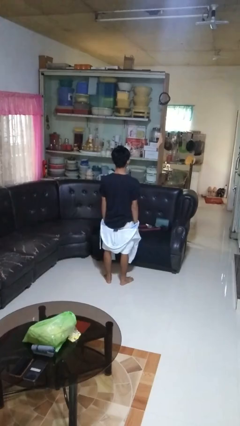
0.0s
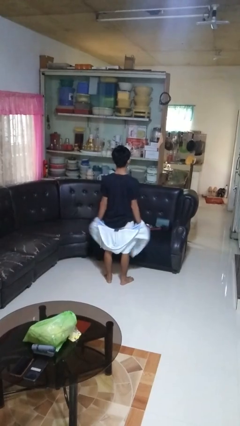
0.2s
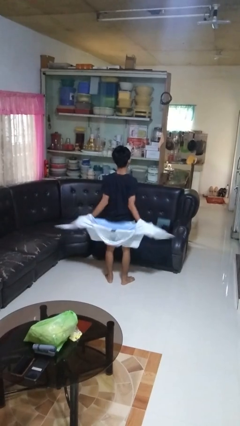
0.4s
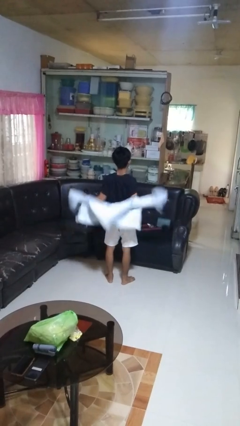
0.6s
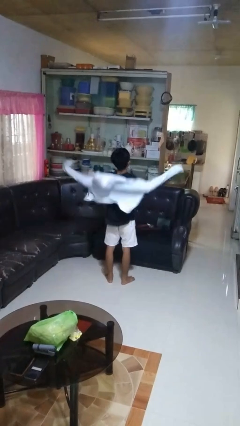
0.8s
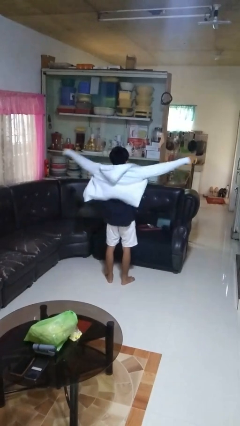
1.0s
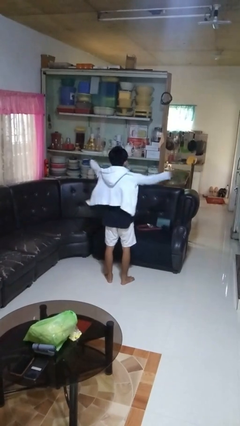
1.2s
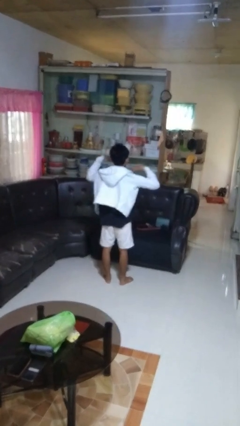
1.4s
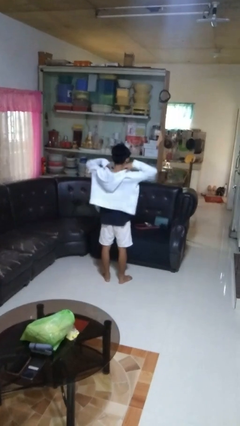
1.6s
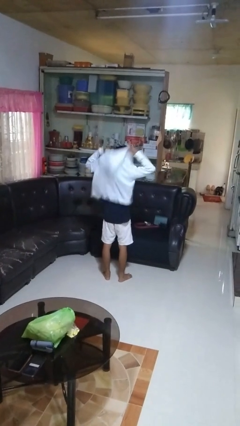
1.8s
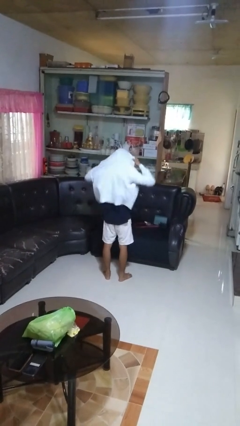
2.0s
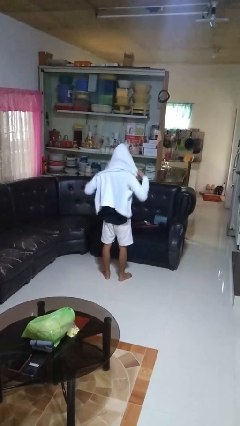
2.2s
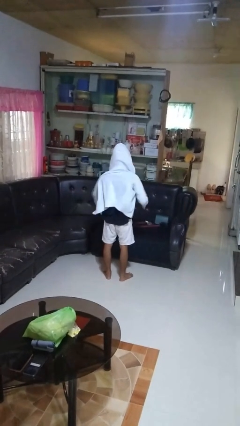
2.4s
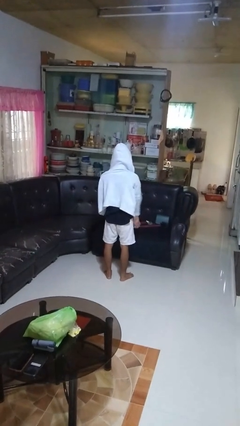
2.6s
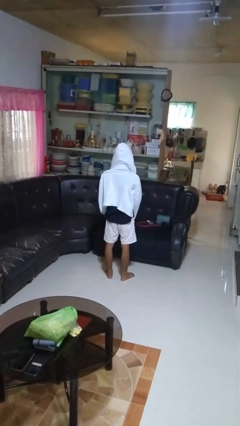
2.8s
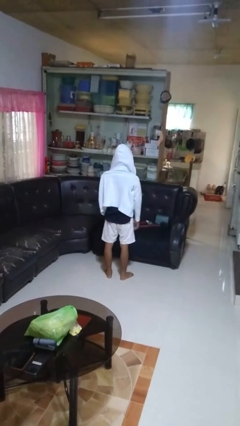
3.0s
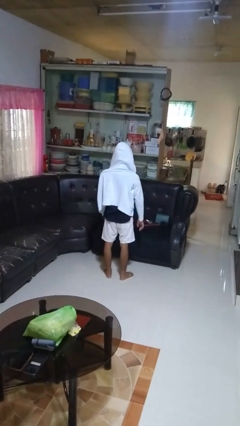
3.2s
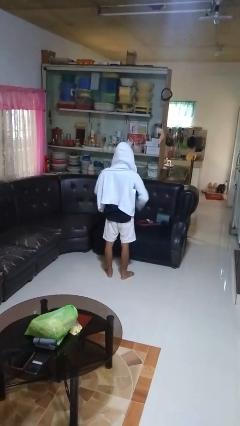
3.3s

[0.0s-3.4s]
person puts on hoodie

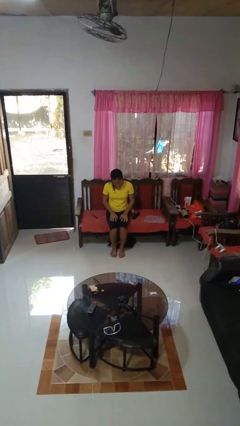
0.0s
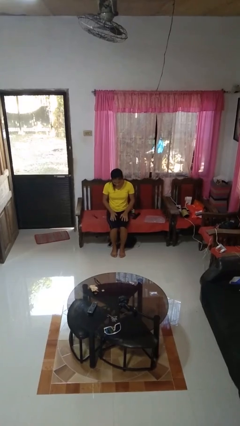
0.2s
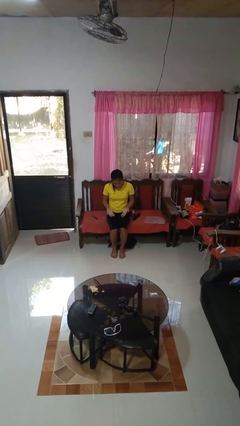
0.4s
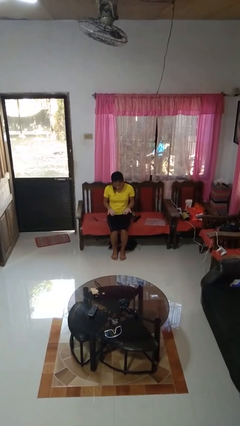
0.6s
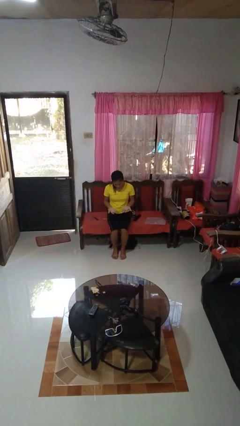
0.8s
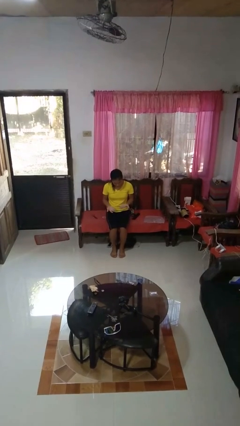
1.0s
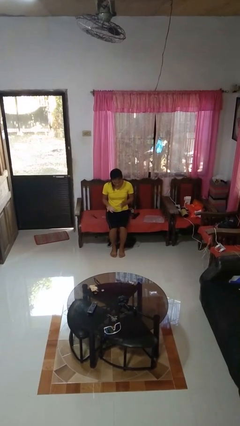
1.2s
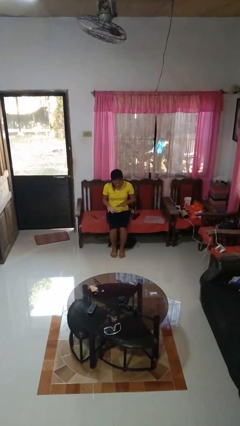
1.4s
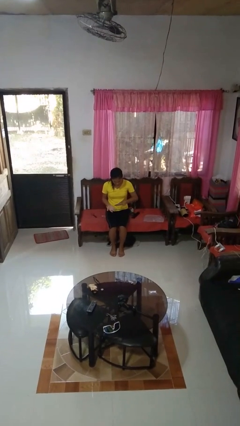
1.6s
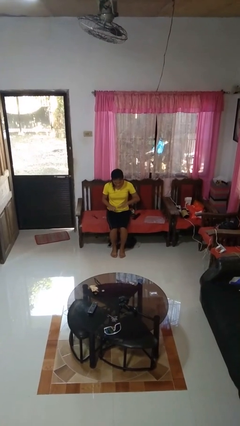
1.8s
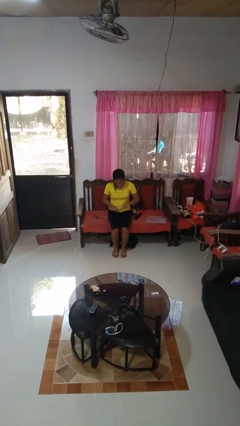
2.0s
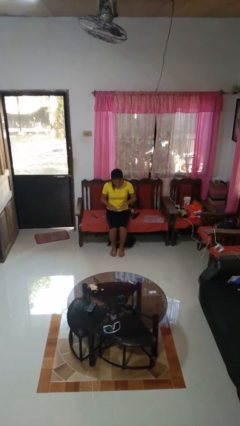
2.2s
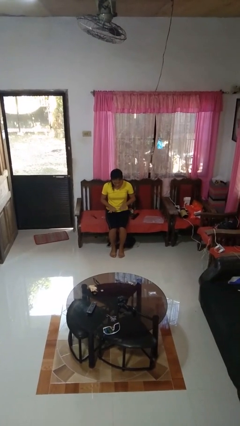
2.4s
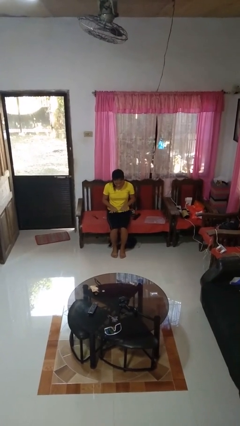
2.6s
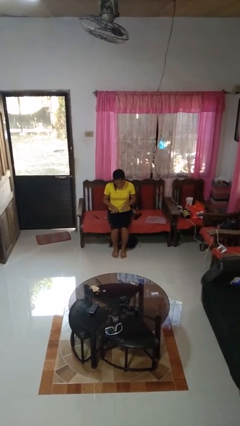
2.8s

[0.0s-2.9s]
person looks at hands in lap

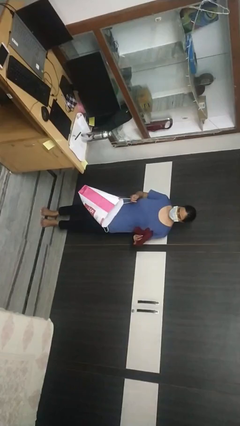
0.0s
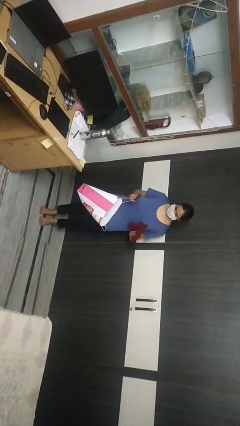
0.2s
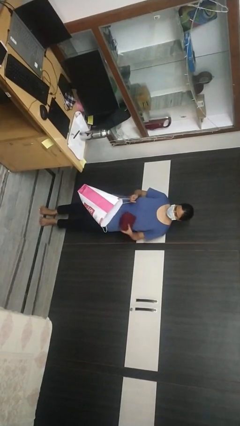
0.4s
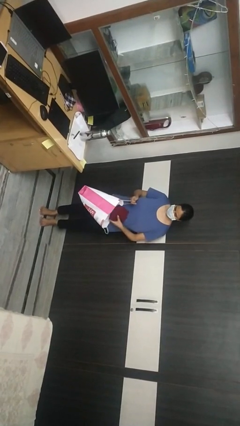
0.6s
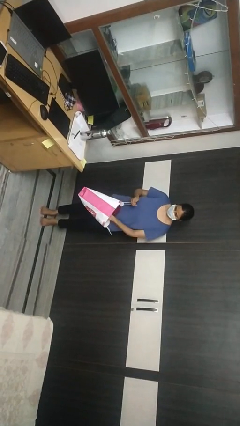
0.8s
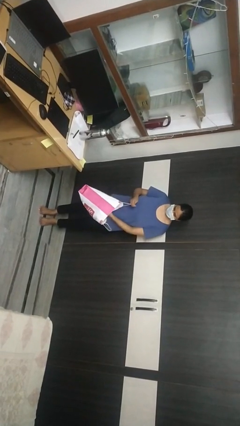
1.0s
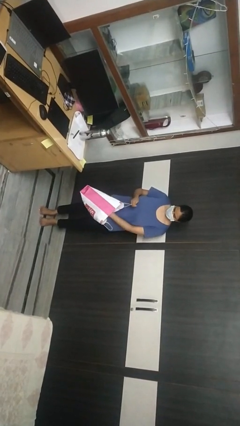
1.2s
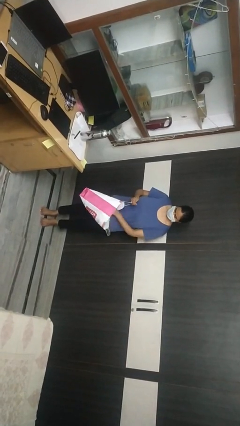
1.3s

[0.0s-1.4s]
person puts object into bag

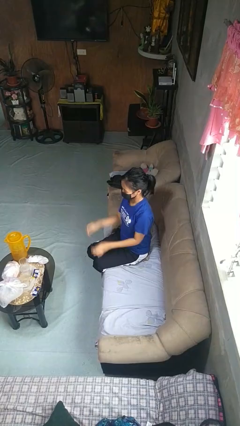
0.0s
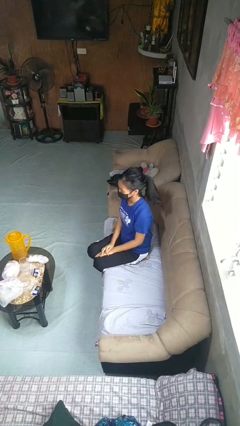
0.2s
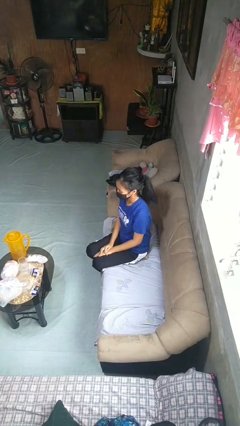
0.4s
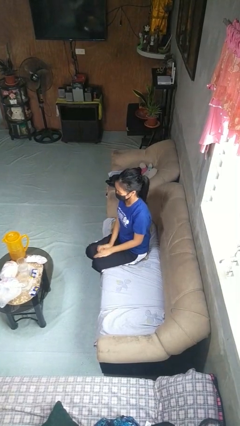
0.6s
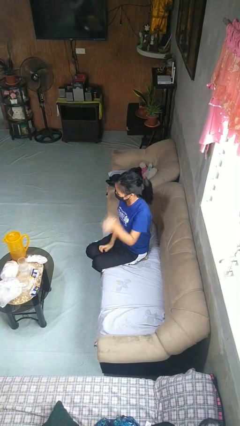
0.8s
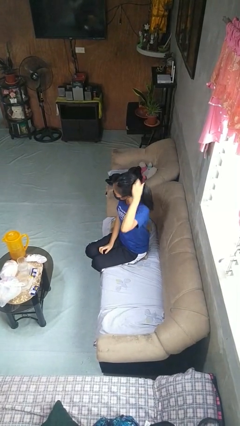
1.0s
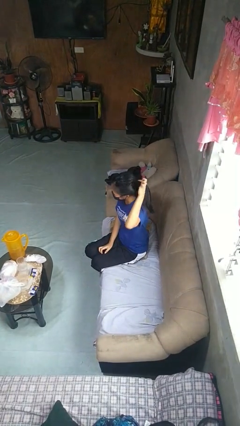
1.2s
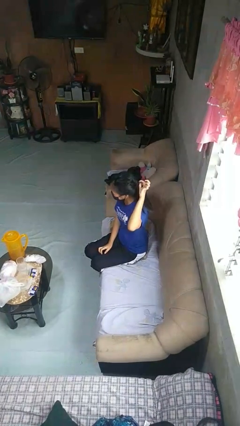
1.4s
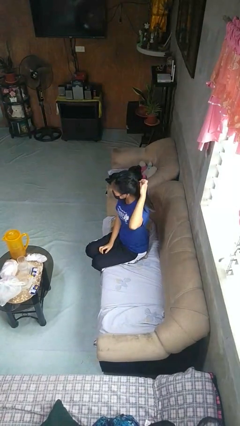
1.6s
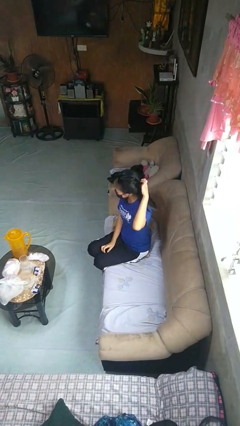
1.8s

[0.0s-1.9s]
person takes off hairtie

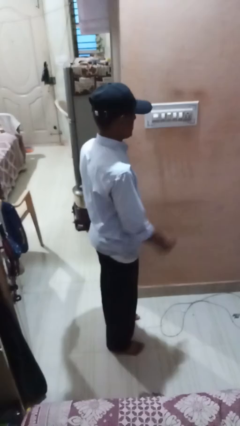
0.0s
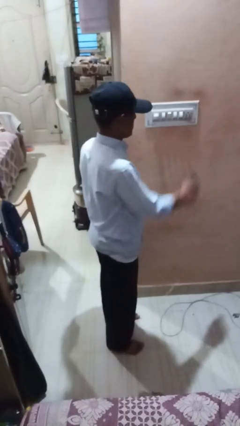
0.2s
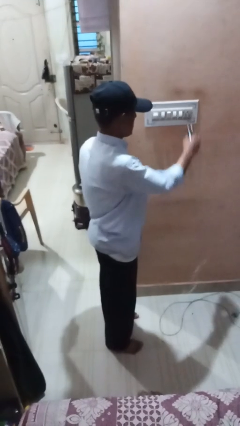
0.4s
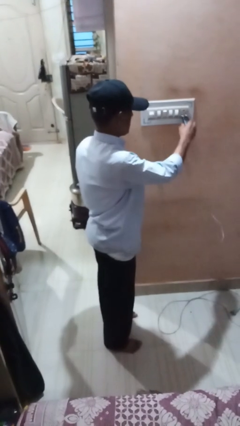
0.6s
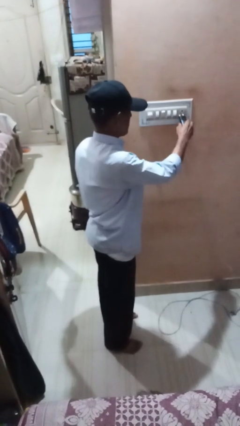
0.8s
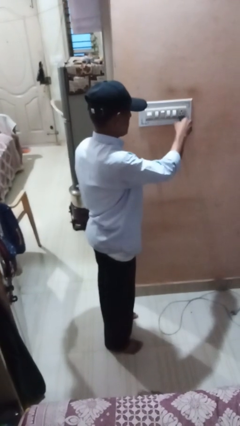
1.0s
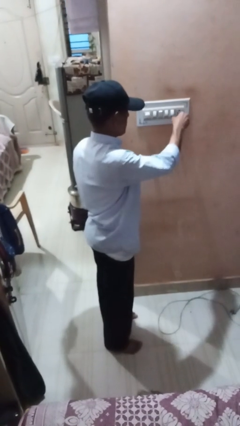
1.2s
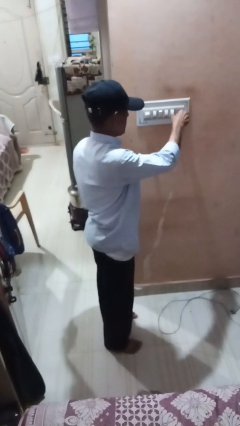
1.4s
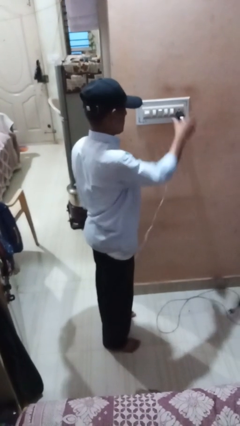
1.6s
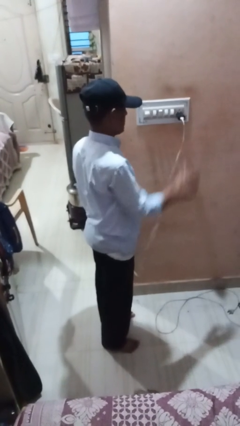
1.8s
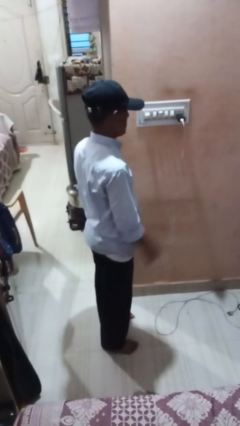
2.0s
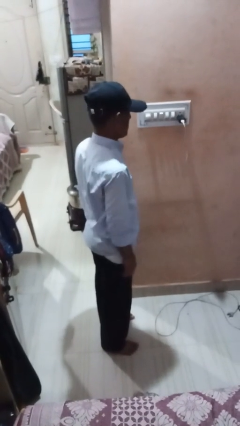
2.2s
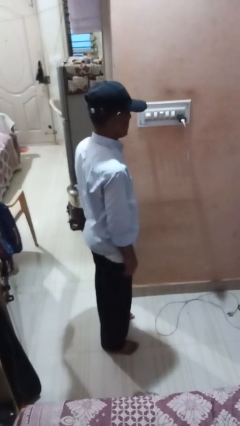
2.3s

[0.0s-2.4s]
person plugs into electrical socket

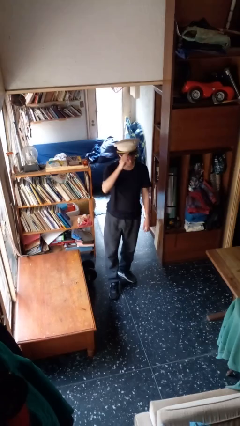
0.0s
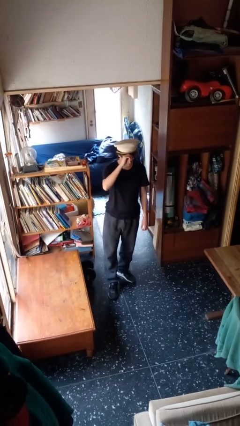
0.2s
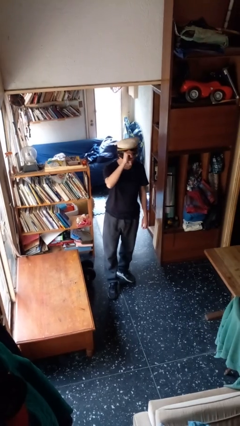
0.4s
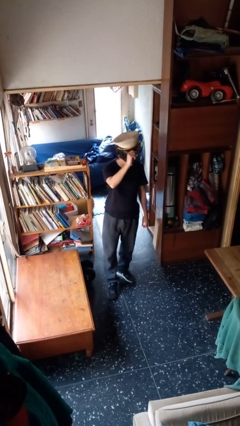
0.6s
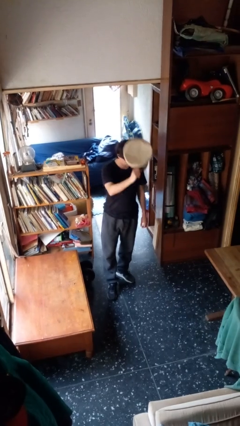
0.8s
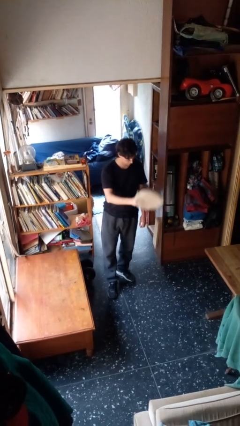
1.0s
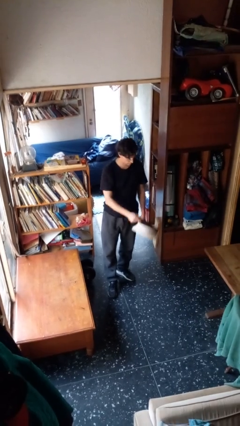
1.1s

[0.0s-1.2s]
person takes off hat

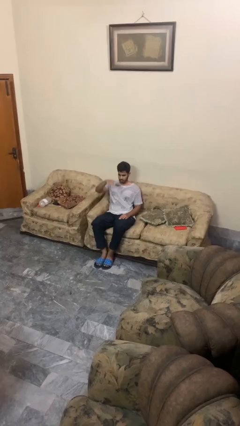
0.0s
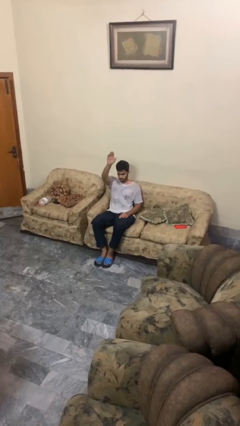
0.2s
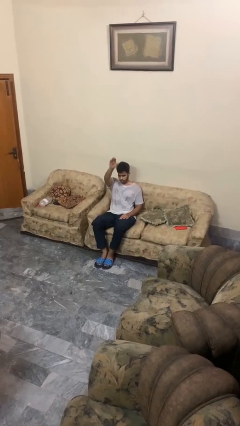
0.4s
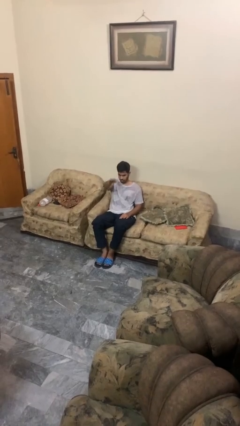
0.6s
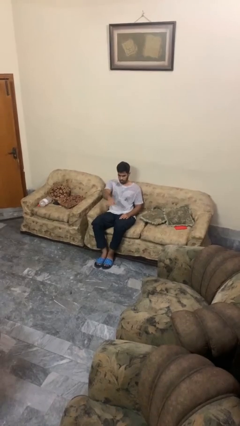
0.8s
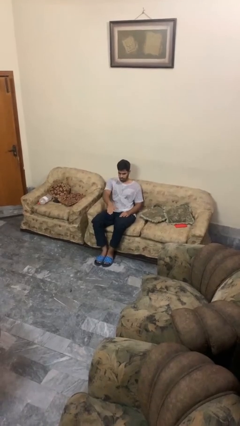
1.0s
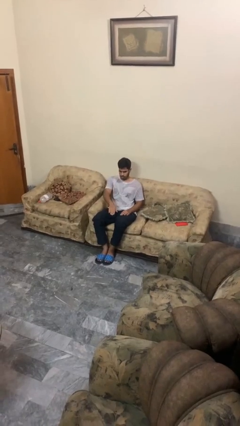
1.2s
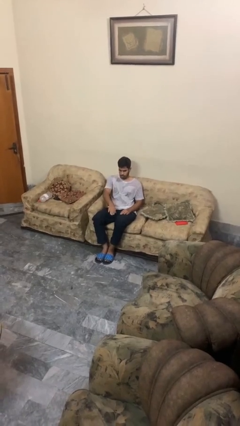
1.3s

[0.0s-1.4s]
person gestures swipe down

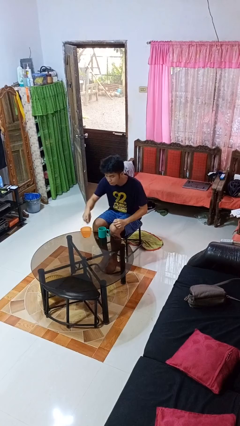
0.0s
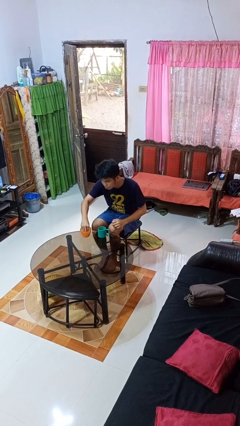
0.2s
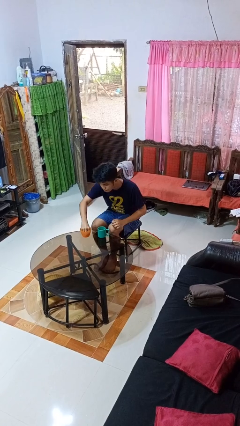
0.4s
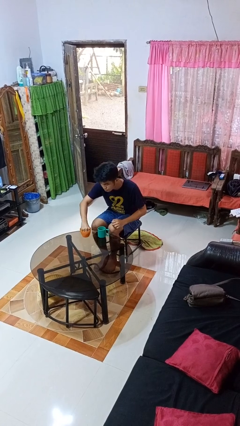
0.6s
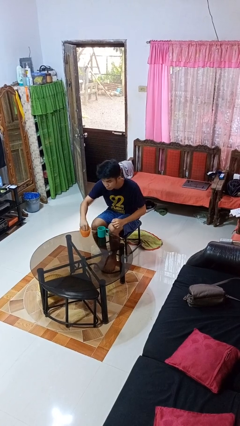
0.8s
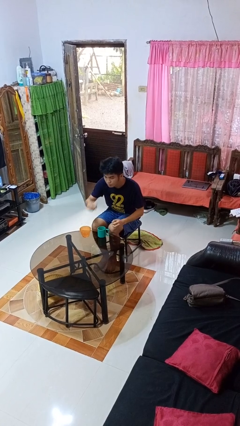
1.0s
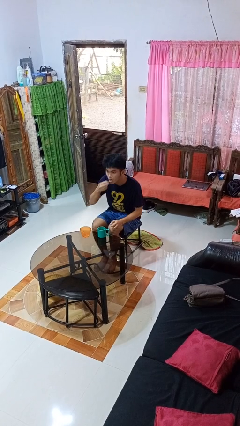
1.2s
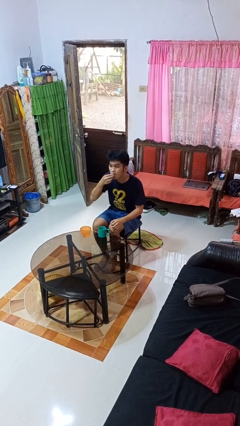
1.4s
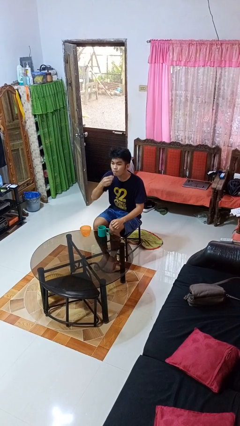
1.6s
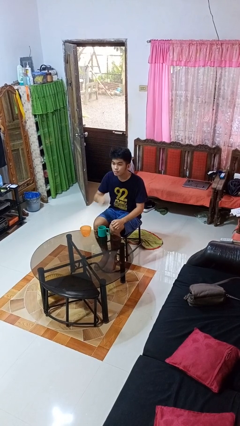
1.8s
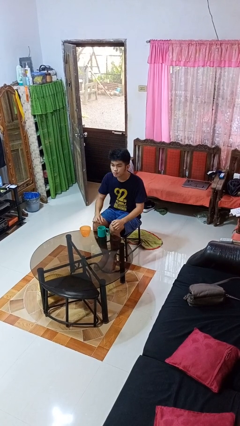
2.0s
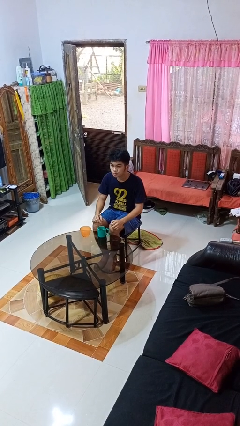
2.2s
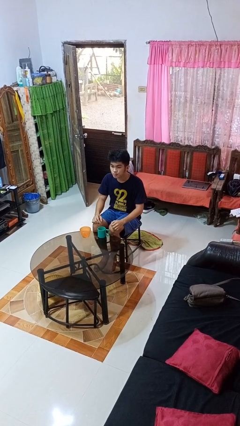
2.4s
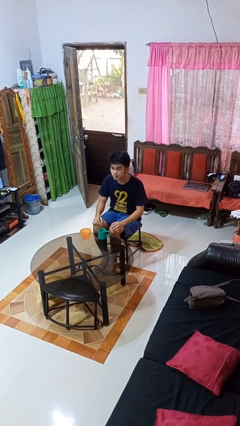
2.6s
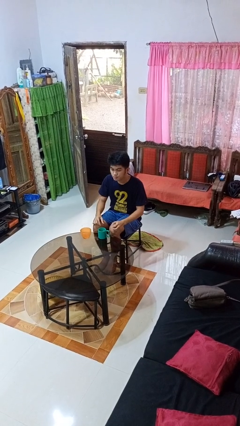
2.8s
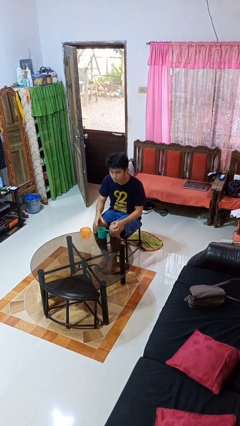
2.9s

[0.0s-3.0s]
person takes medicine pills
